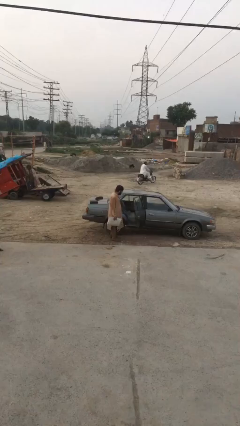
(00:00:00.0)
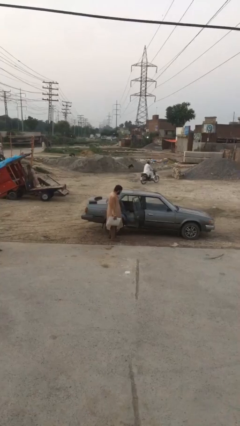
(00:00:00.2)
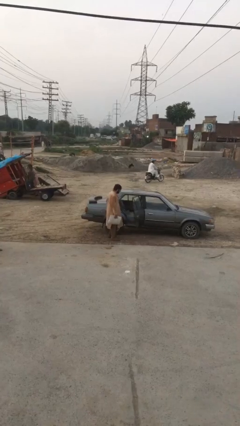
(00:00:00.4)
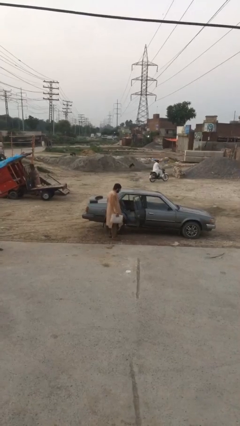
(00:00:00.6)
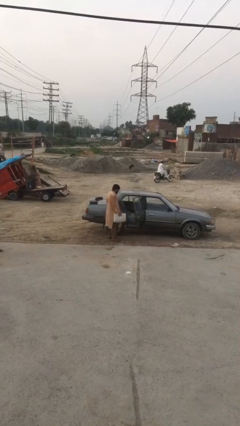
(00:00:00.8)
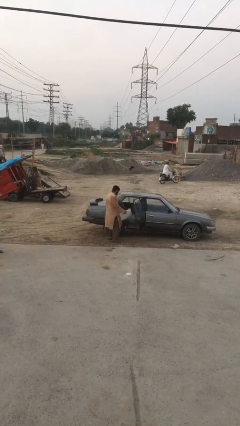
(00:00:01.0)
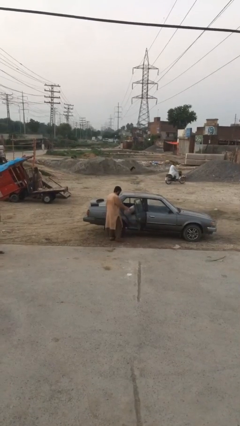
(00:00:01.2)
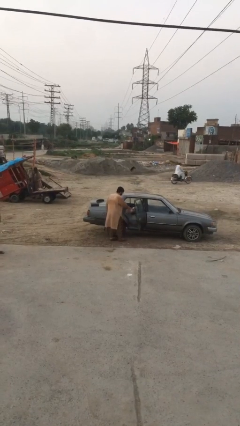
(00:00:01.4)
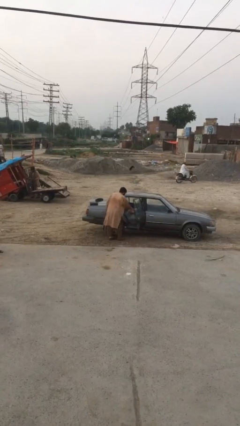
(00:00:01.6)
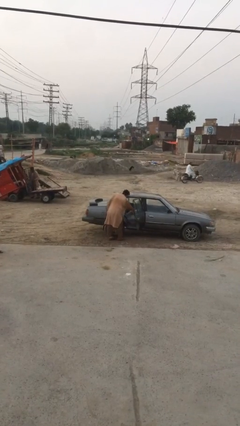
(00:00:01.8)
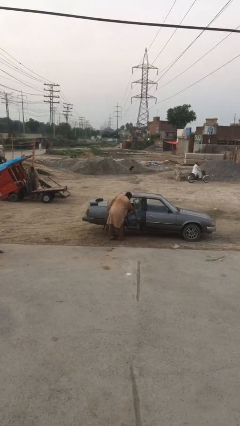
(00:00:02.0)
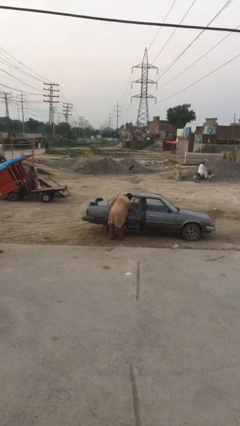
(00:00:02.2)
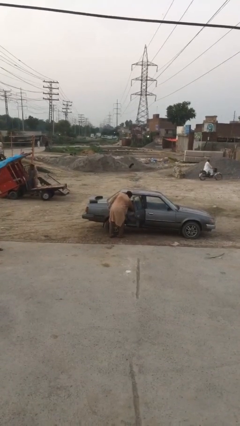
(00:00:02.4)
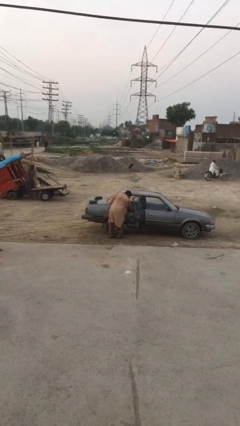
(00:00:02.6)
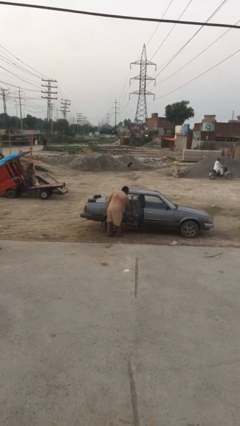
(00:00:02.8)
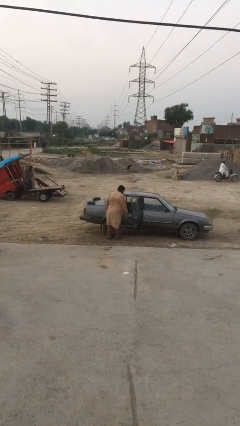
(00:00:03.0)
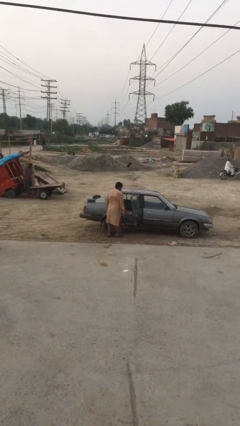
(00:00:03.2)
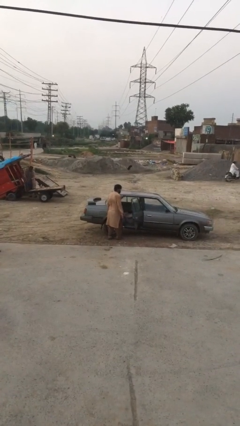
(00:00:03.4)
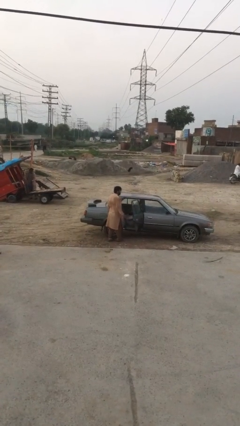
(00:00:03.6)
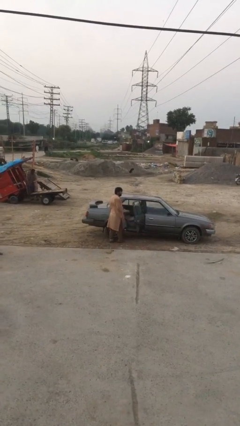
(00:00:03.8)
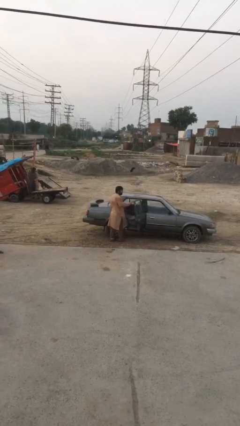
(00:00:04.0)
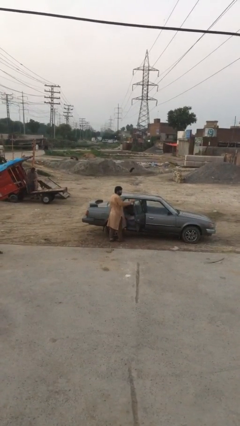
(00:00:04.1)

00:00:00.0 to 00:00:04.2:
person loads car

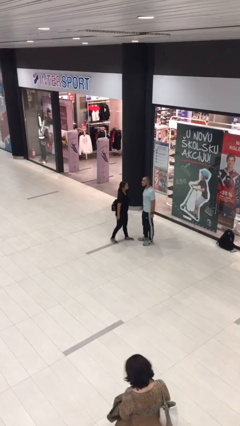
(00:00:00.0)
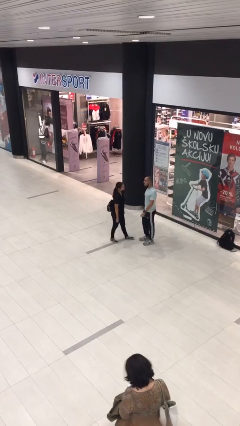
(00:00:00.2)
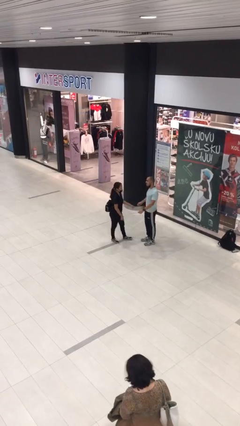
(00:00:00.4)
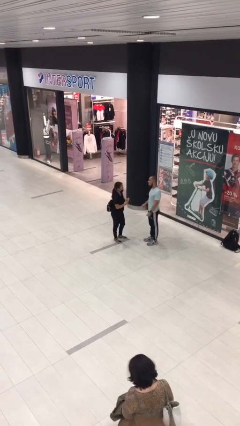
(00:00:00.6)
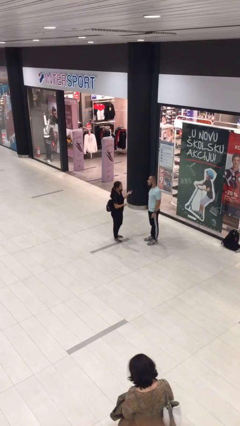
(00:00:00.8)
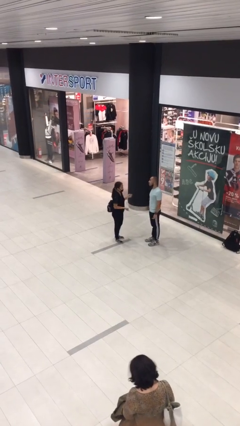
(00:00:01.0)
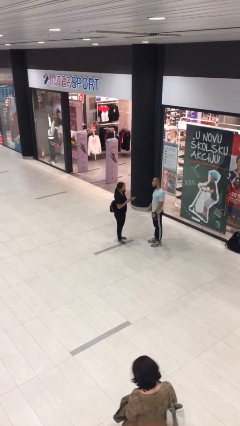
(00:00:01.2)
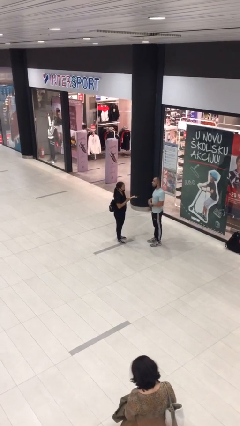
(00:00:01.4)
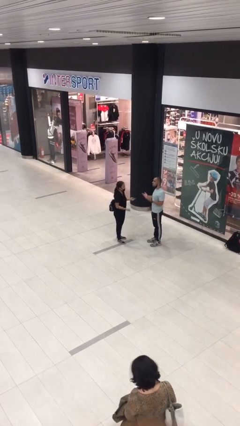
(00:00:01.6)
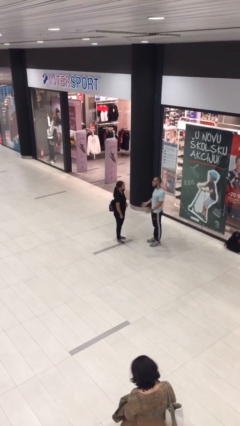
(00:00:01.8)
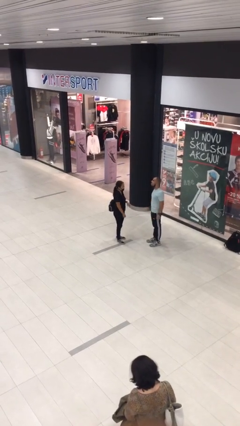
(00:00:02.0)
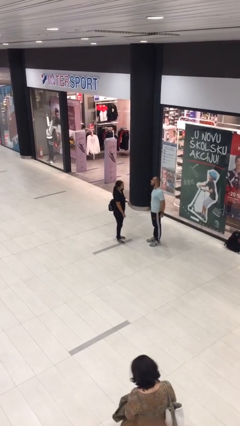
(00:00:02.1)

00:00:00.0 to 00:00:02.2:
person talks to person

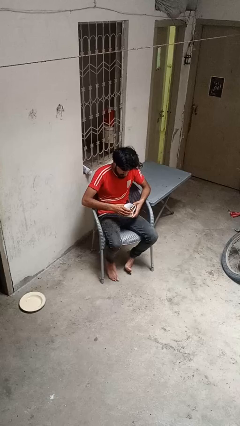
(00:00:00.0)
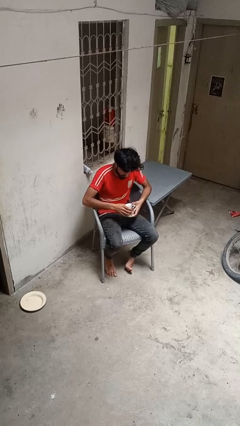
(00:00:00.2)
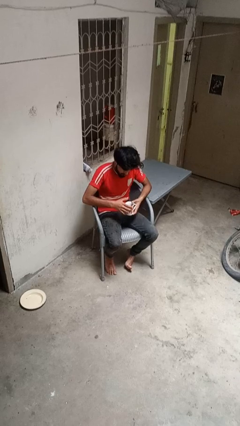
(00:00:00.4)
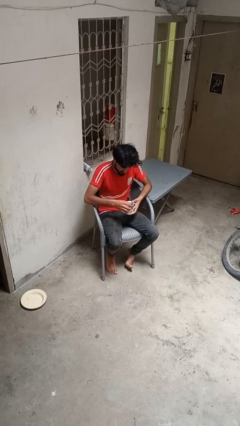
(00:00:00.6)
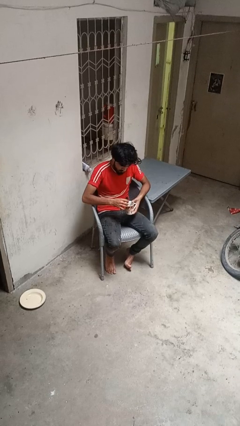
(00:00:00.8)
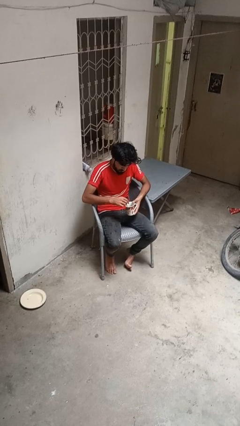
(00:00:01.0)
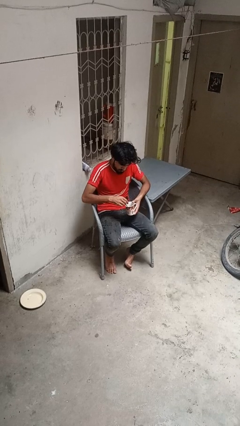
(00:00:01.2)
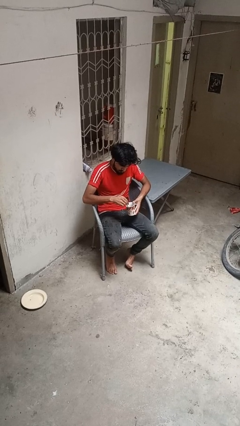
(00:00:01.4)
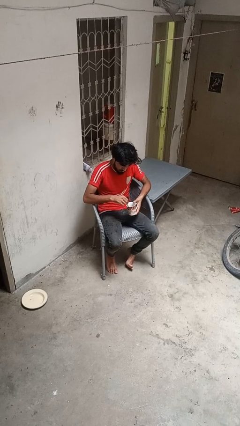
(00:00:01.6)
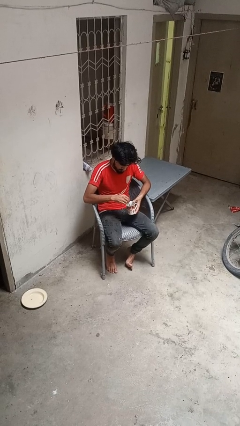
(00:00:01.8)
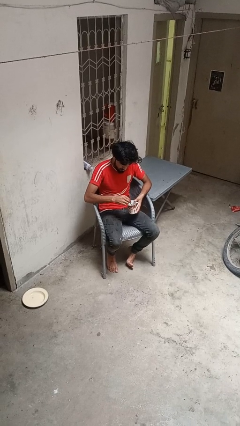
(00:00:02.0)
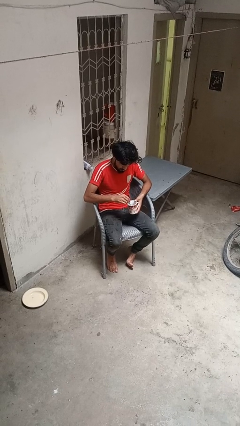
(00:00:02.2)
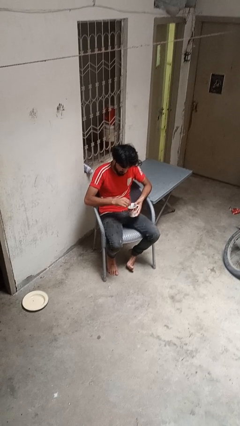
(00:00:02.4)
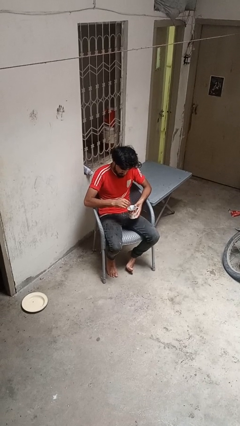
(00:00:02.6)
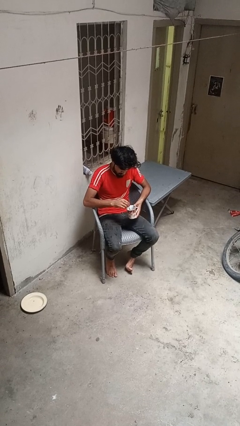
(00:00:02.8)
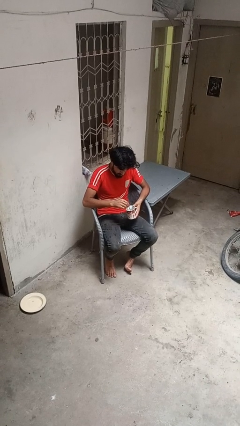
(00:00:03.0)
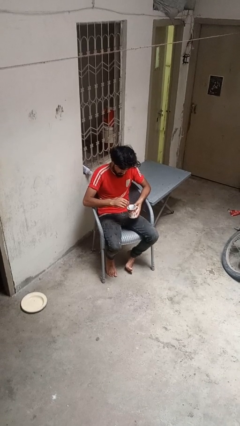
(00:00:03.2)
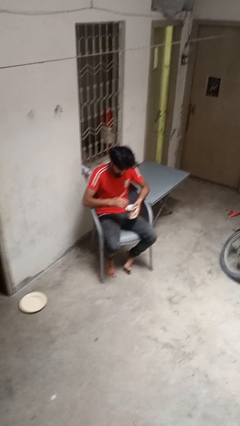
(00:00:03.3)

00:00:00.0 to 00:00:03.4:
person stirs mug

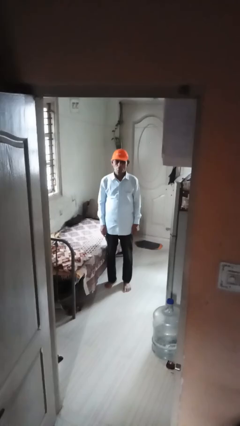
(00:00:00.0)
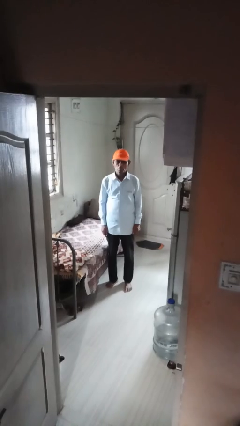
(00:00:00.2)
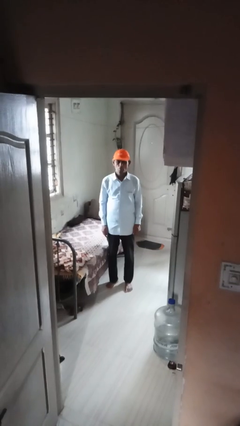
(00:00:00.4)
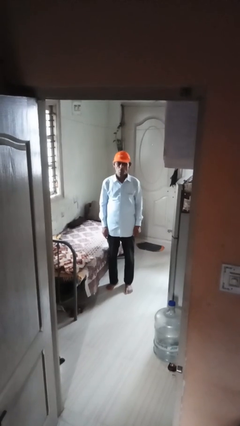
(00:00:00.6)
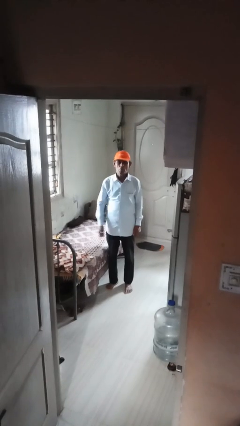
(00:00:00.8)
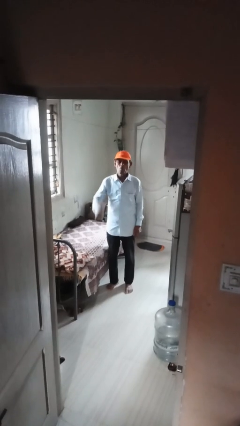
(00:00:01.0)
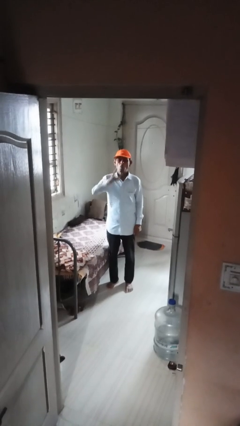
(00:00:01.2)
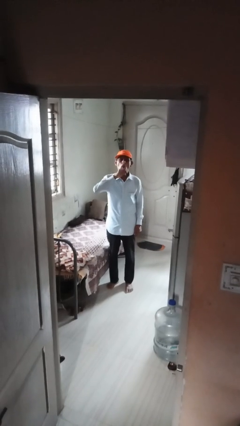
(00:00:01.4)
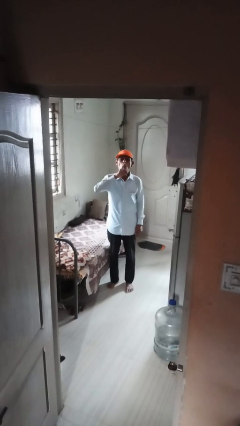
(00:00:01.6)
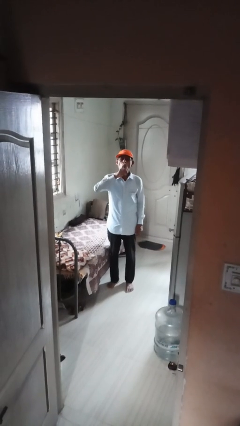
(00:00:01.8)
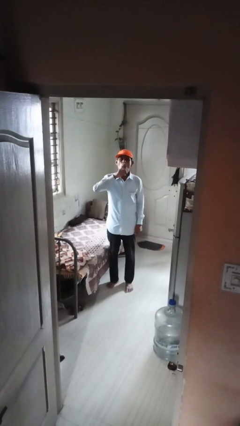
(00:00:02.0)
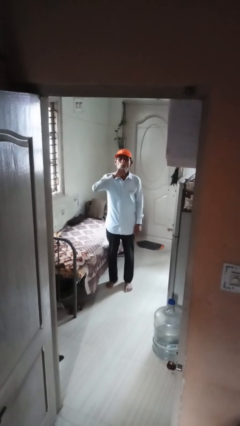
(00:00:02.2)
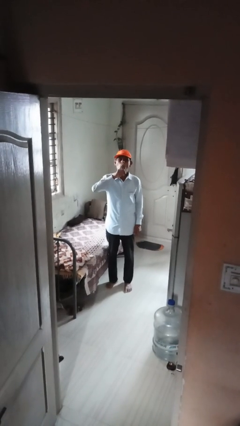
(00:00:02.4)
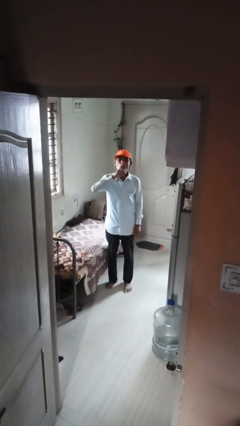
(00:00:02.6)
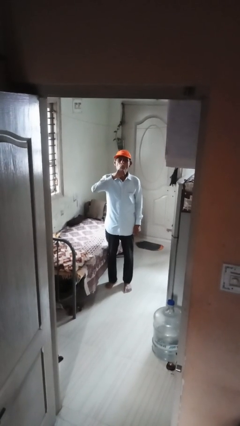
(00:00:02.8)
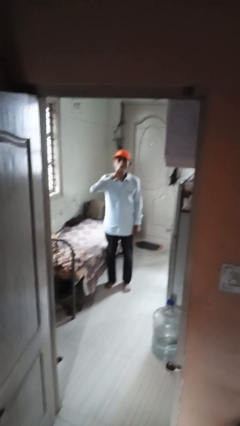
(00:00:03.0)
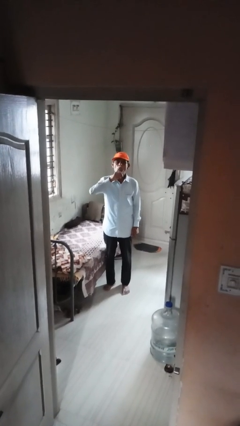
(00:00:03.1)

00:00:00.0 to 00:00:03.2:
person gestures be quiet

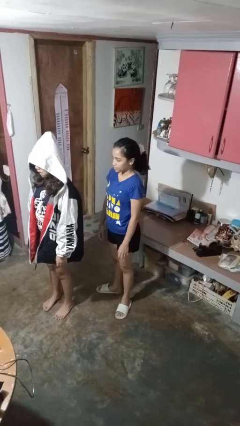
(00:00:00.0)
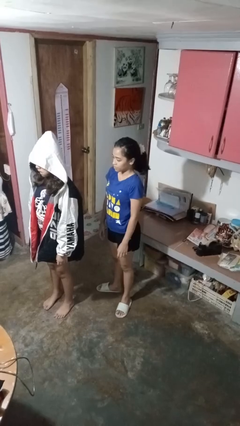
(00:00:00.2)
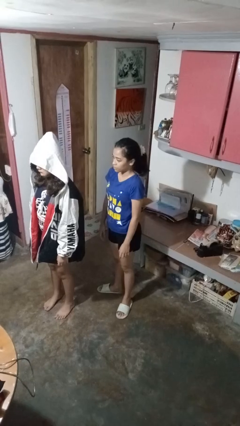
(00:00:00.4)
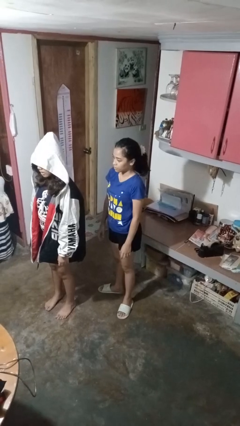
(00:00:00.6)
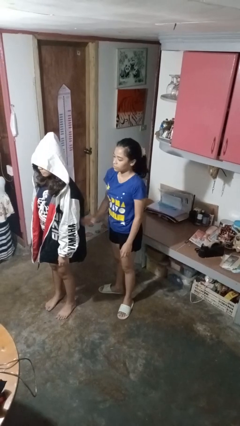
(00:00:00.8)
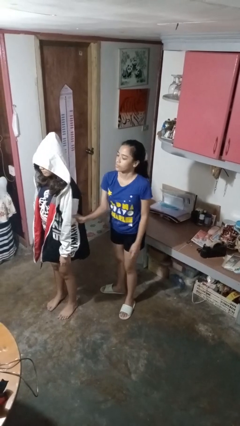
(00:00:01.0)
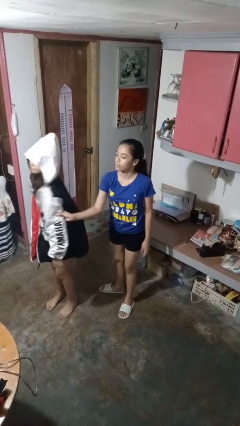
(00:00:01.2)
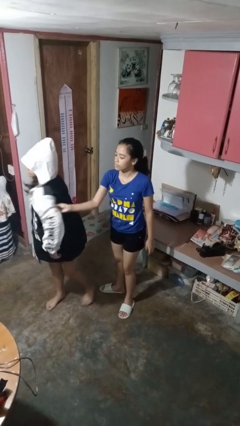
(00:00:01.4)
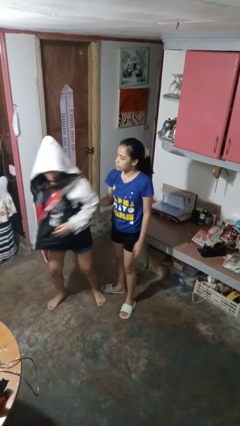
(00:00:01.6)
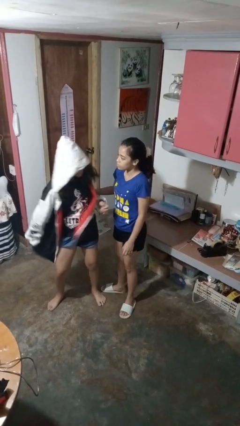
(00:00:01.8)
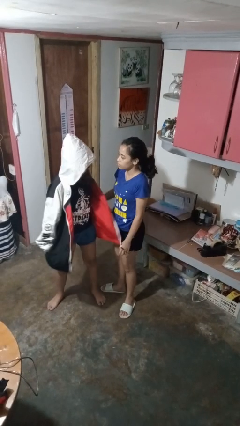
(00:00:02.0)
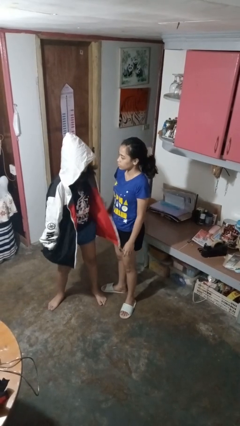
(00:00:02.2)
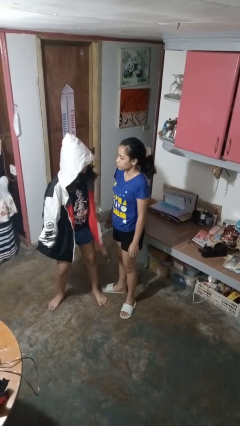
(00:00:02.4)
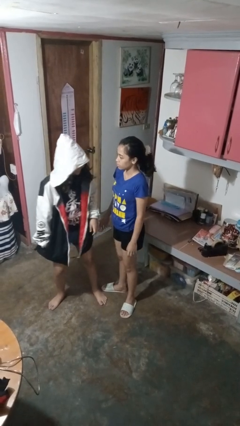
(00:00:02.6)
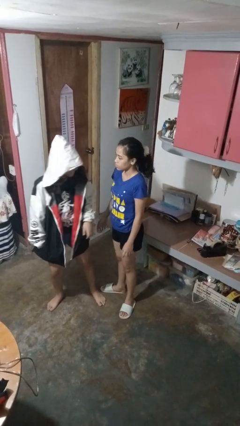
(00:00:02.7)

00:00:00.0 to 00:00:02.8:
person grabs person by bicep

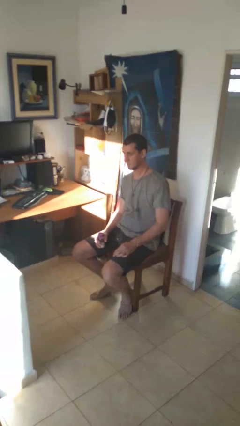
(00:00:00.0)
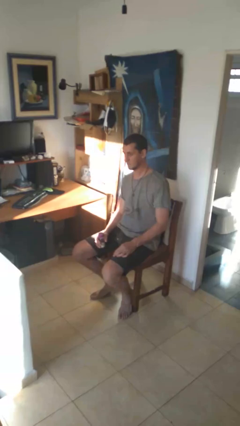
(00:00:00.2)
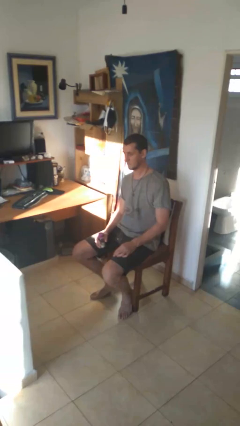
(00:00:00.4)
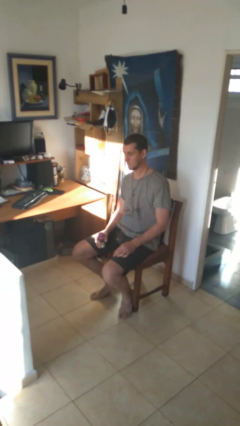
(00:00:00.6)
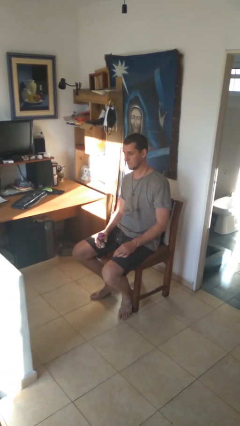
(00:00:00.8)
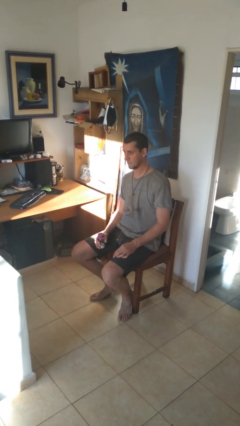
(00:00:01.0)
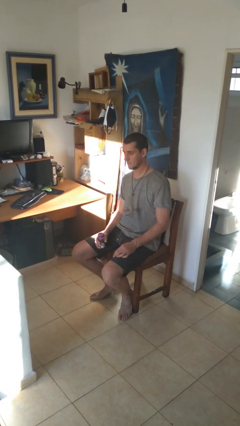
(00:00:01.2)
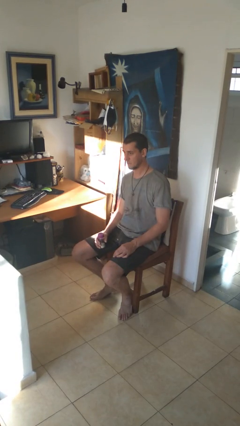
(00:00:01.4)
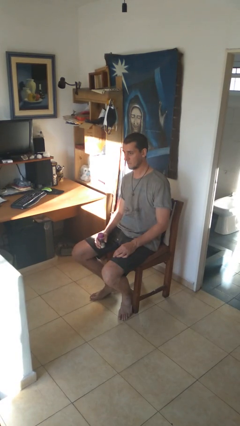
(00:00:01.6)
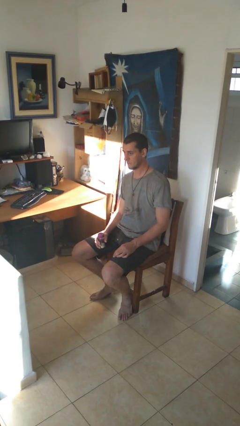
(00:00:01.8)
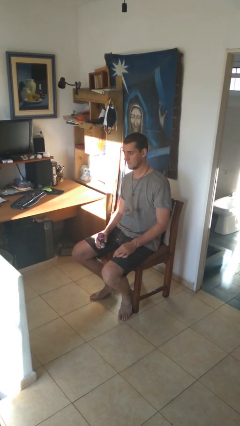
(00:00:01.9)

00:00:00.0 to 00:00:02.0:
person opens jar
